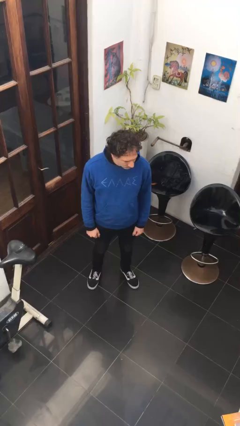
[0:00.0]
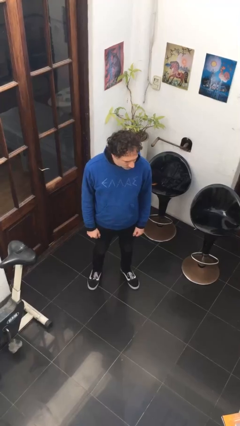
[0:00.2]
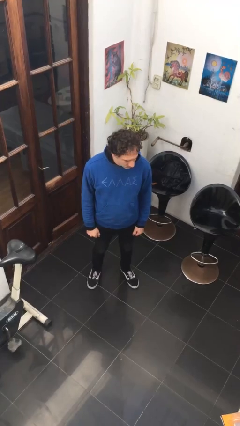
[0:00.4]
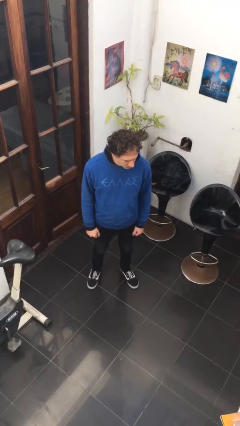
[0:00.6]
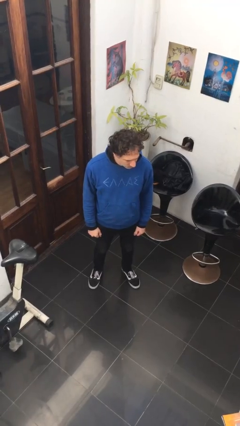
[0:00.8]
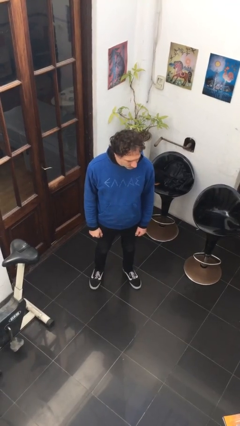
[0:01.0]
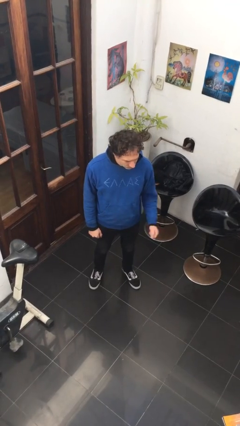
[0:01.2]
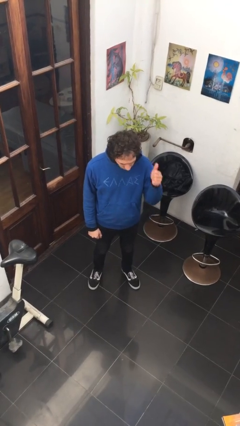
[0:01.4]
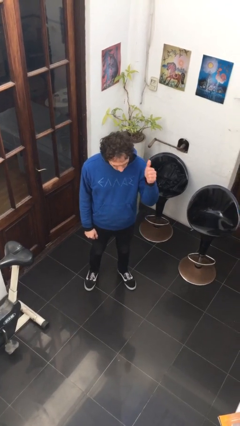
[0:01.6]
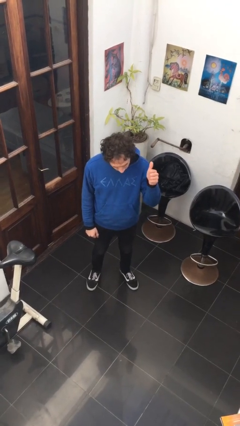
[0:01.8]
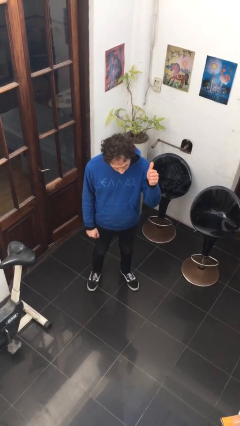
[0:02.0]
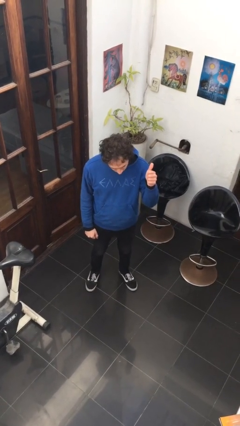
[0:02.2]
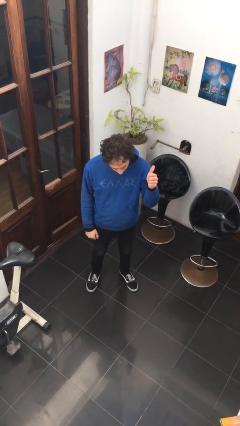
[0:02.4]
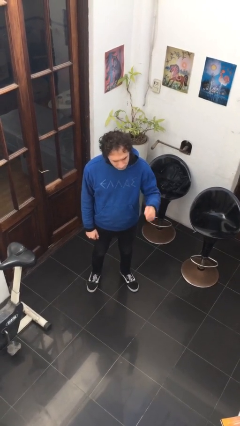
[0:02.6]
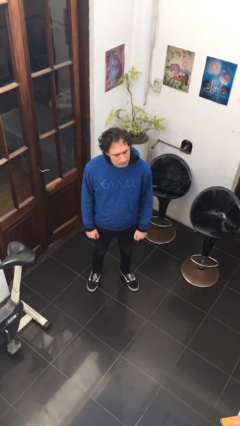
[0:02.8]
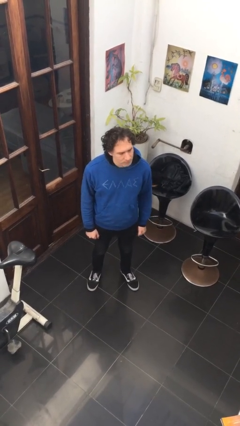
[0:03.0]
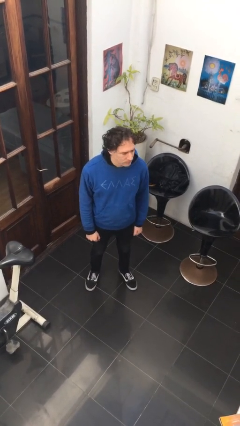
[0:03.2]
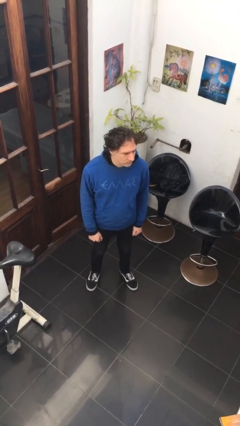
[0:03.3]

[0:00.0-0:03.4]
person gestures thumbs up

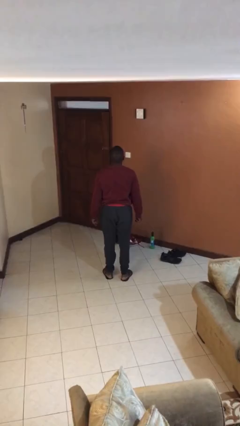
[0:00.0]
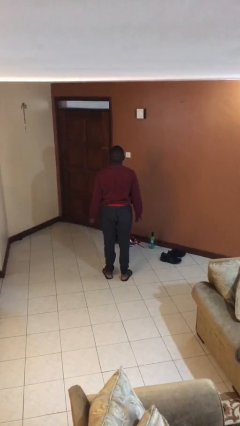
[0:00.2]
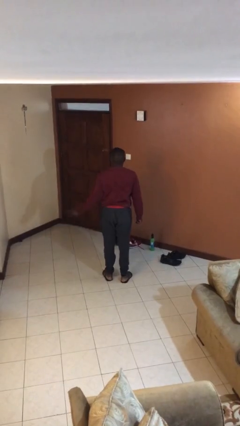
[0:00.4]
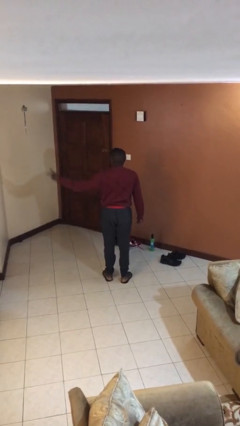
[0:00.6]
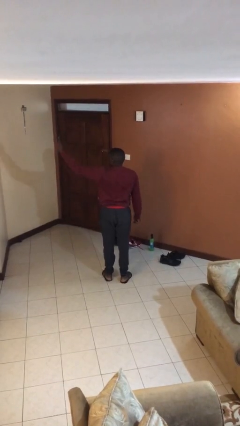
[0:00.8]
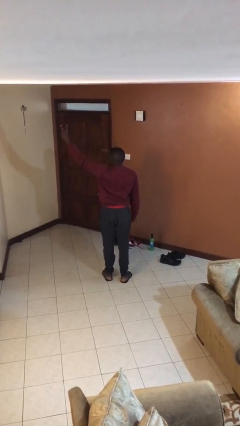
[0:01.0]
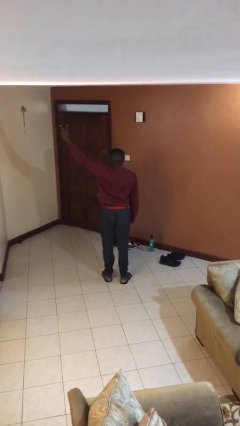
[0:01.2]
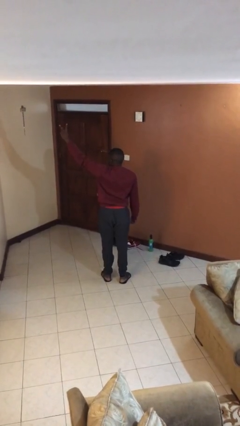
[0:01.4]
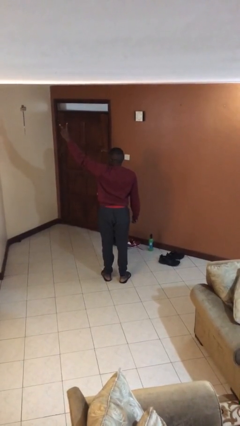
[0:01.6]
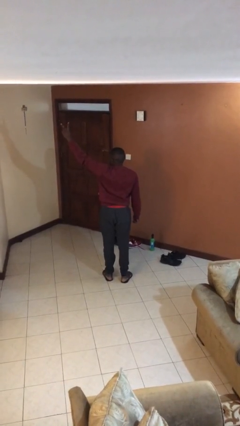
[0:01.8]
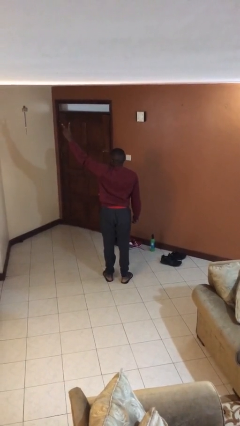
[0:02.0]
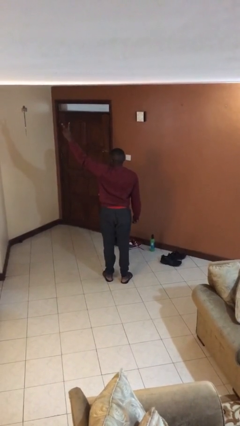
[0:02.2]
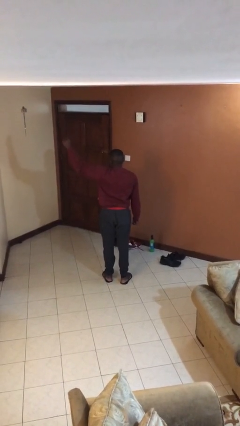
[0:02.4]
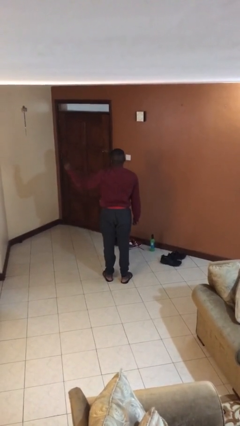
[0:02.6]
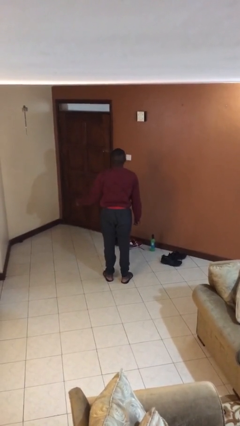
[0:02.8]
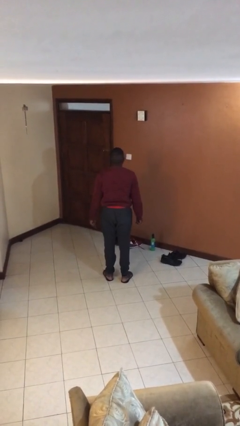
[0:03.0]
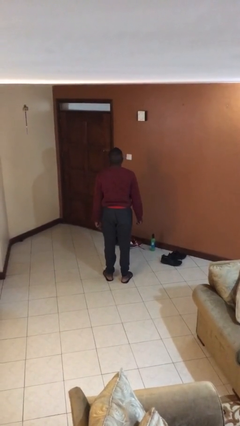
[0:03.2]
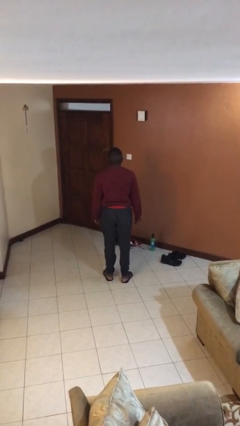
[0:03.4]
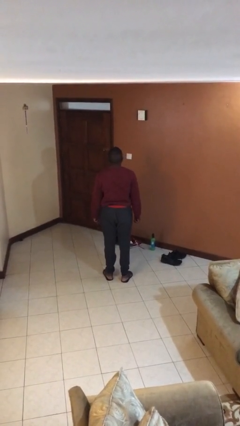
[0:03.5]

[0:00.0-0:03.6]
person gestures peace

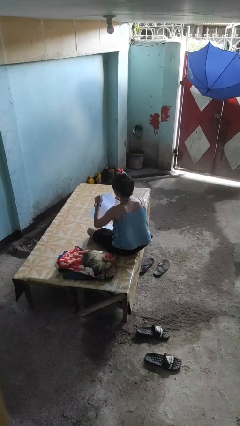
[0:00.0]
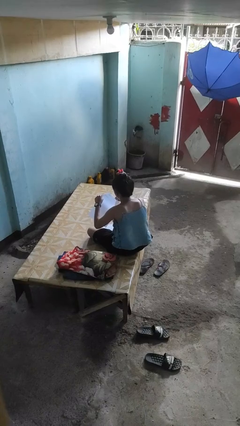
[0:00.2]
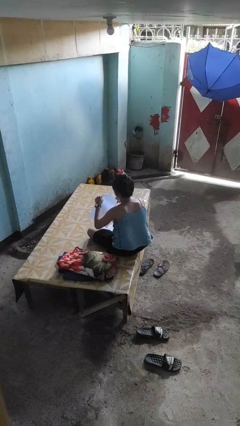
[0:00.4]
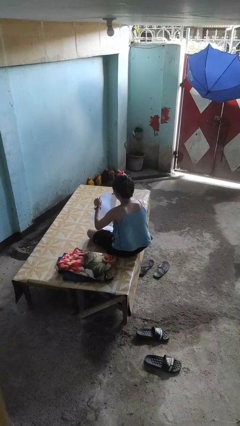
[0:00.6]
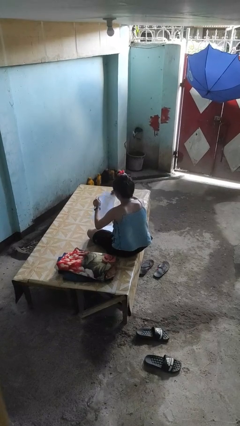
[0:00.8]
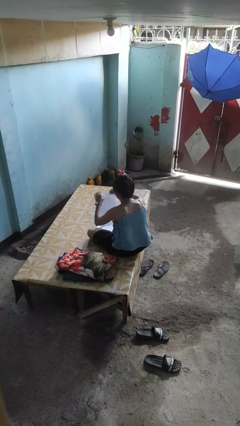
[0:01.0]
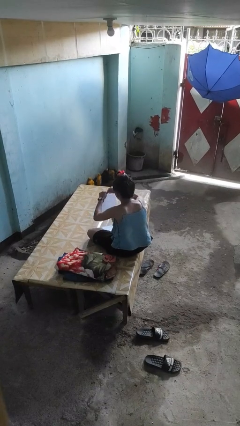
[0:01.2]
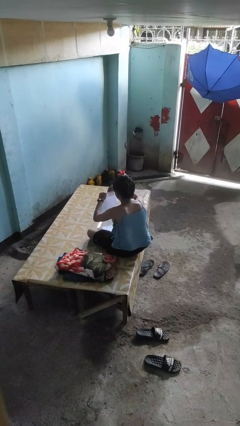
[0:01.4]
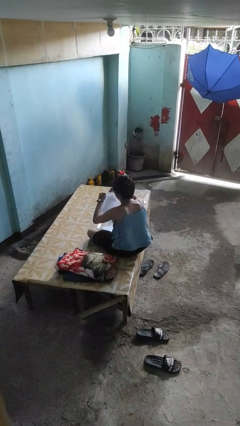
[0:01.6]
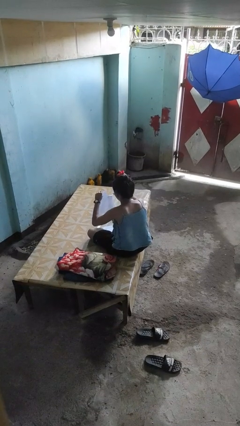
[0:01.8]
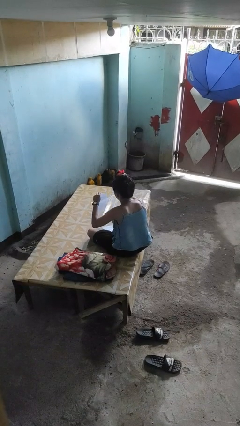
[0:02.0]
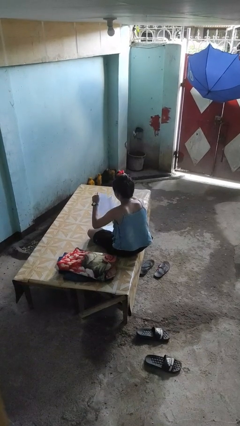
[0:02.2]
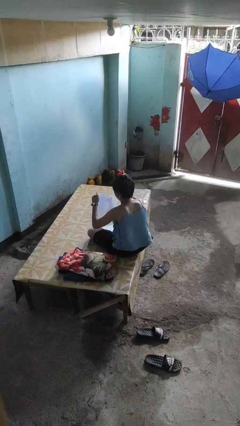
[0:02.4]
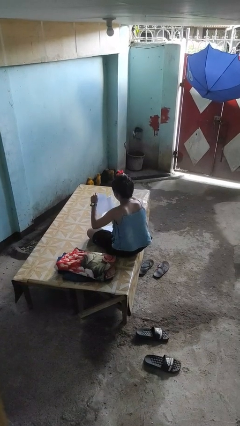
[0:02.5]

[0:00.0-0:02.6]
person tears paper

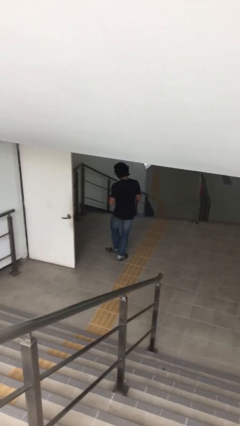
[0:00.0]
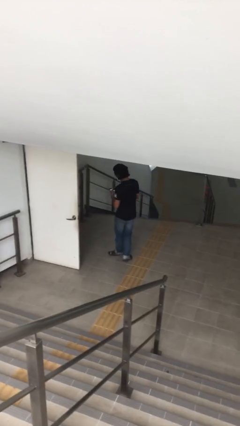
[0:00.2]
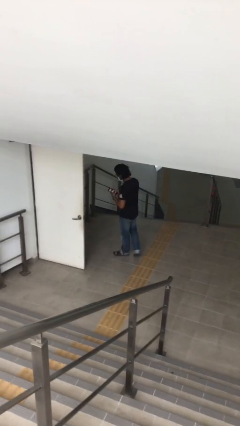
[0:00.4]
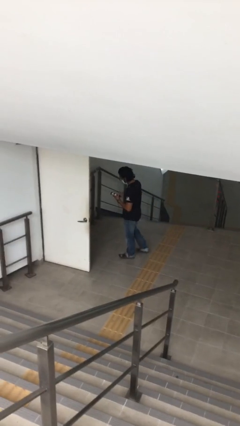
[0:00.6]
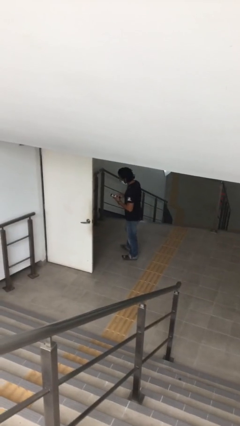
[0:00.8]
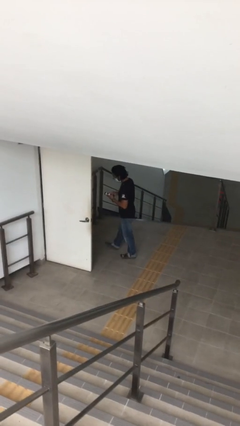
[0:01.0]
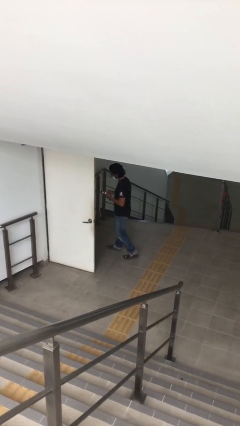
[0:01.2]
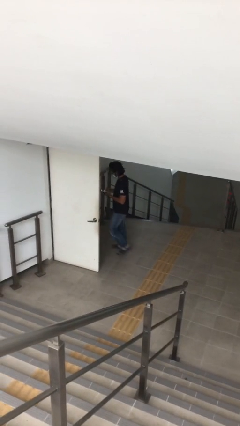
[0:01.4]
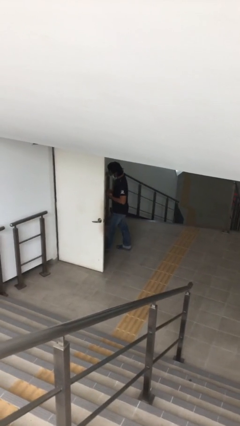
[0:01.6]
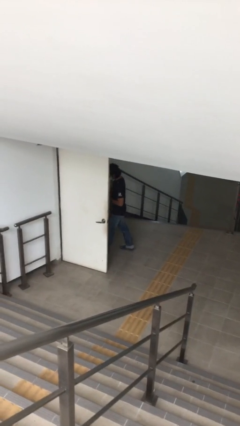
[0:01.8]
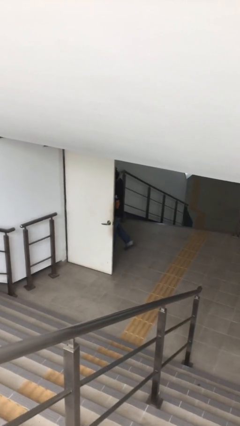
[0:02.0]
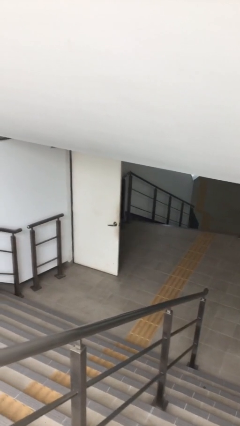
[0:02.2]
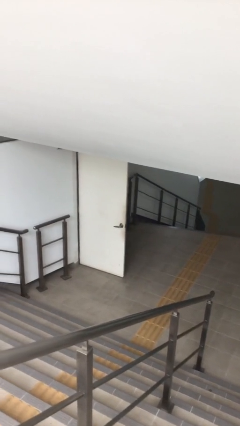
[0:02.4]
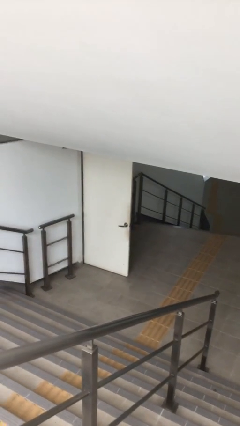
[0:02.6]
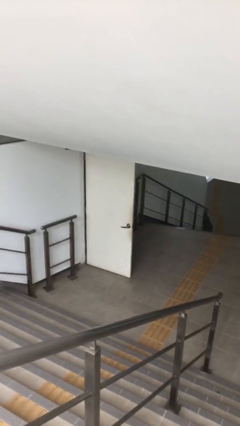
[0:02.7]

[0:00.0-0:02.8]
person exits scene through structure

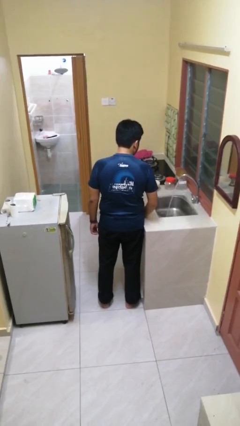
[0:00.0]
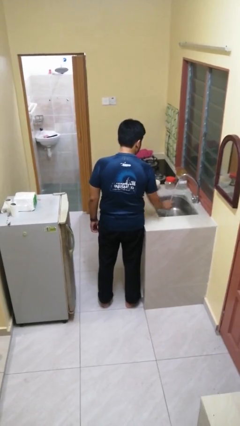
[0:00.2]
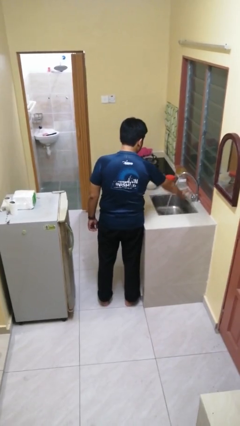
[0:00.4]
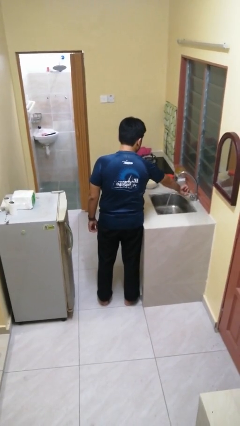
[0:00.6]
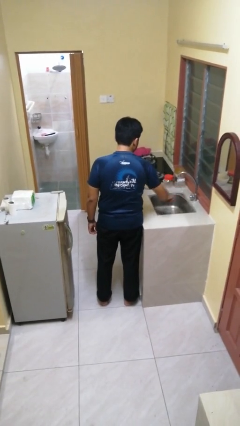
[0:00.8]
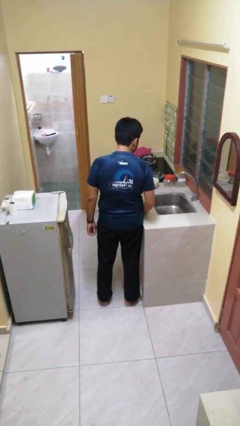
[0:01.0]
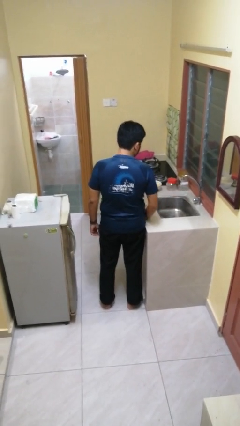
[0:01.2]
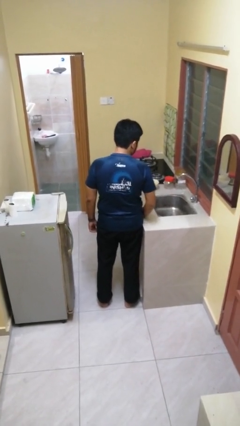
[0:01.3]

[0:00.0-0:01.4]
person turns off faucet

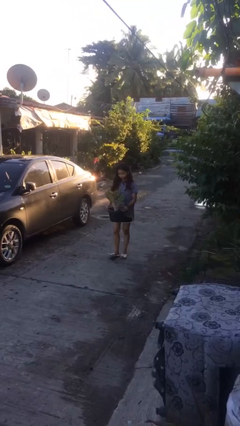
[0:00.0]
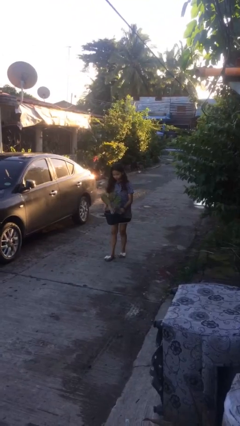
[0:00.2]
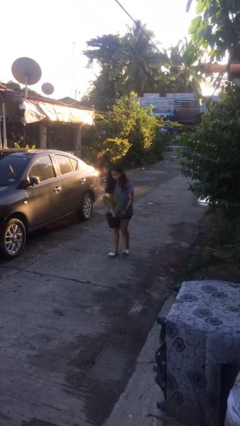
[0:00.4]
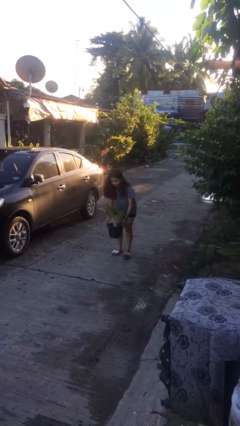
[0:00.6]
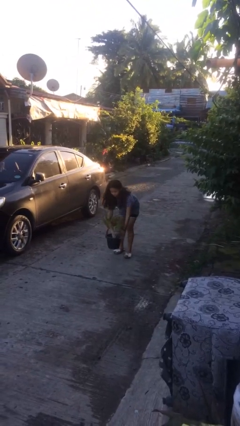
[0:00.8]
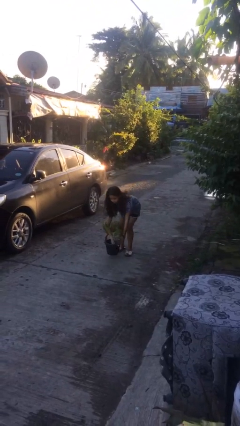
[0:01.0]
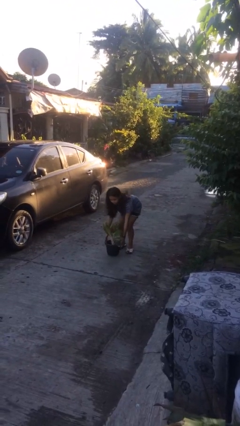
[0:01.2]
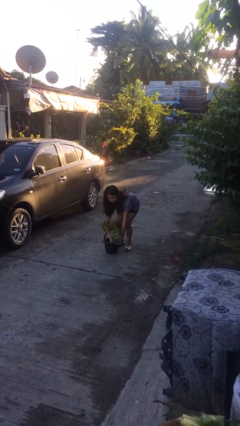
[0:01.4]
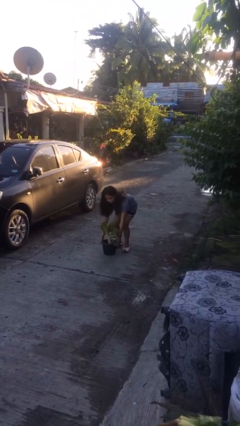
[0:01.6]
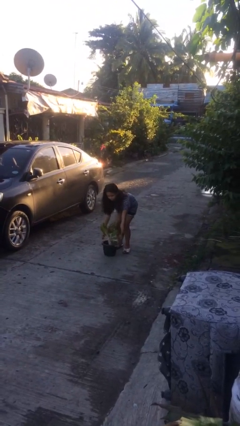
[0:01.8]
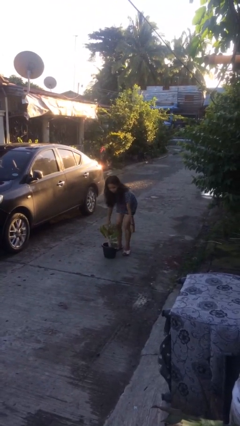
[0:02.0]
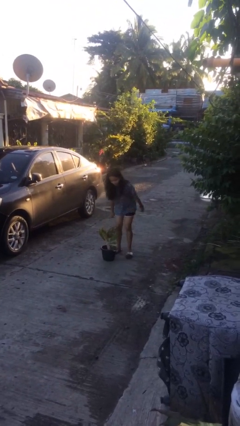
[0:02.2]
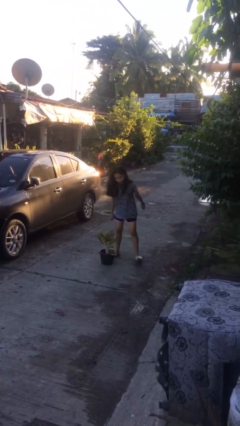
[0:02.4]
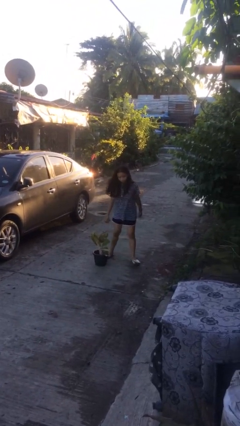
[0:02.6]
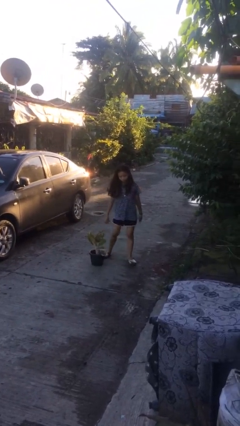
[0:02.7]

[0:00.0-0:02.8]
person puts down object on floor

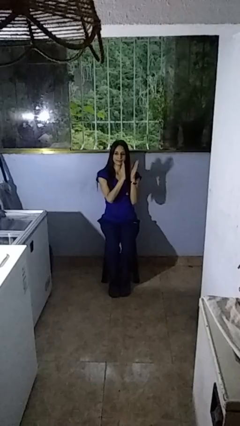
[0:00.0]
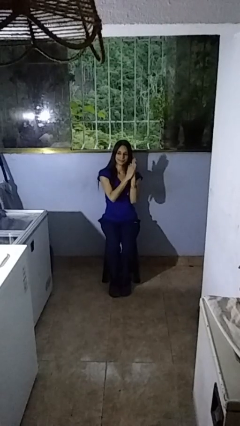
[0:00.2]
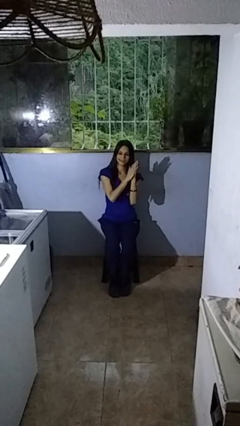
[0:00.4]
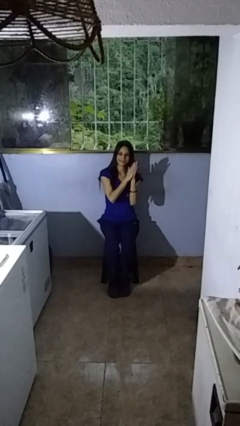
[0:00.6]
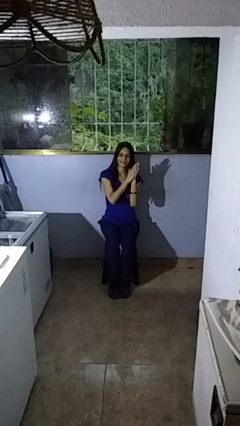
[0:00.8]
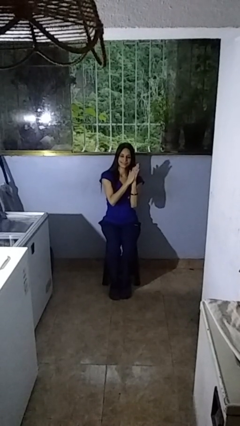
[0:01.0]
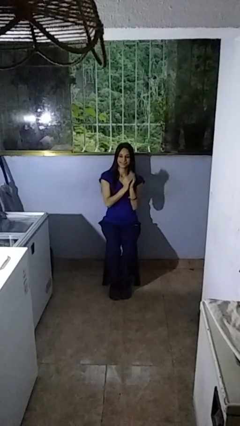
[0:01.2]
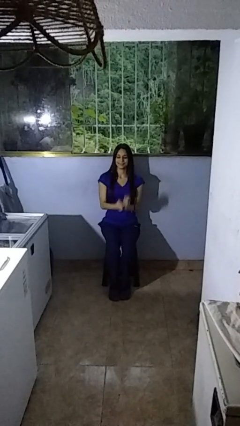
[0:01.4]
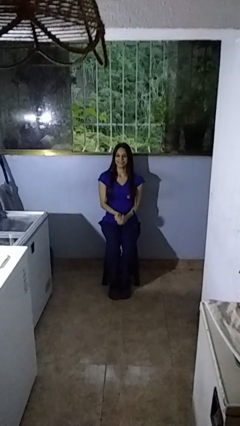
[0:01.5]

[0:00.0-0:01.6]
person claps hands
